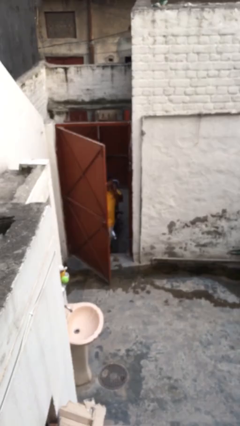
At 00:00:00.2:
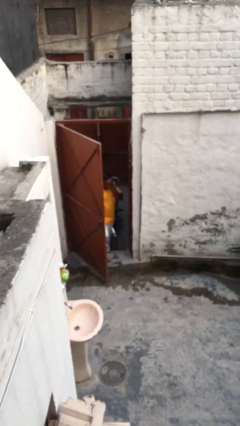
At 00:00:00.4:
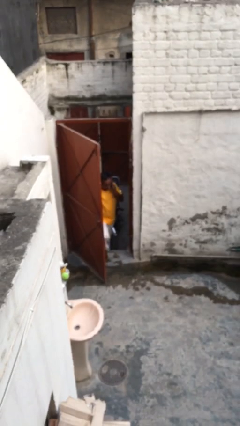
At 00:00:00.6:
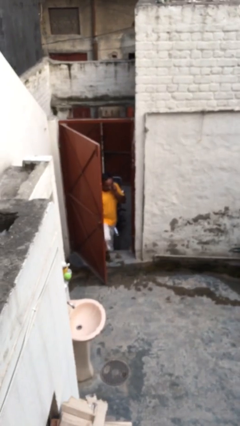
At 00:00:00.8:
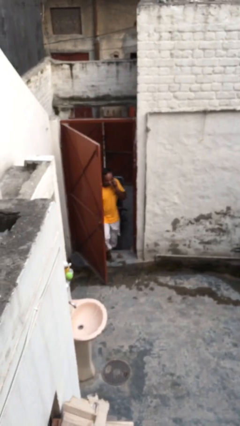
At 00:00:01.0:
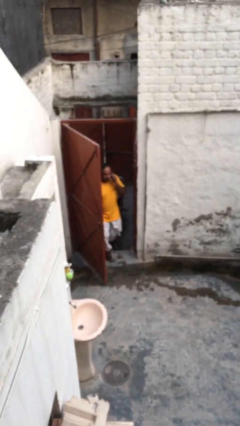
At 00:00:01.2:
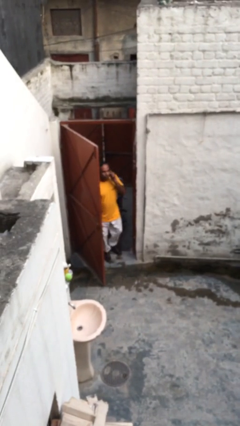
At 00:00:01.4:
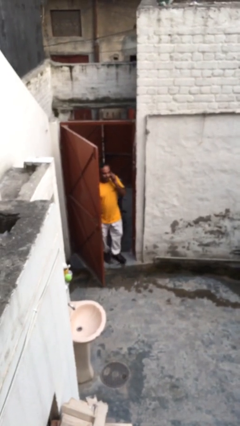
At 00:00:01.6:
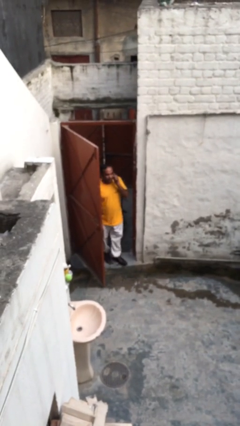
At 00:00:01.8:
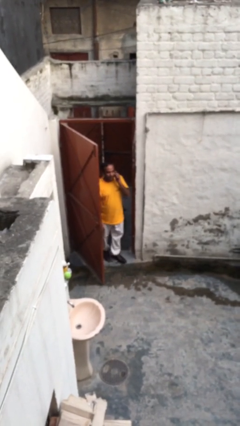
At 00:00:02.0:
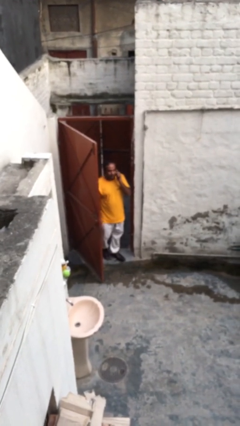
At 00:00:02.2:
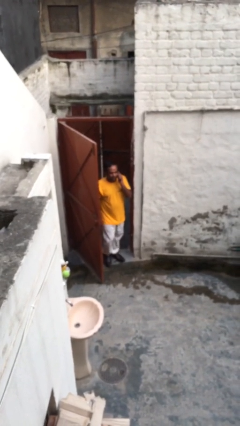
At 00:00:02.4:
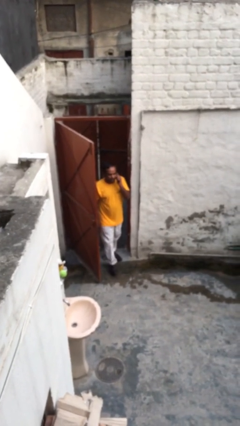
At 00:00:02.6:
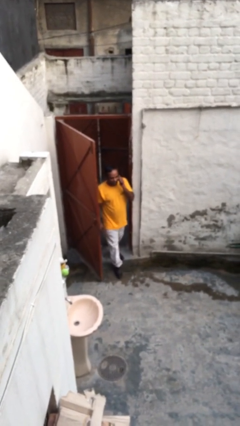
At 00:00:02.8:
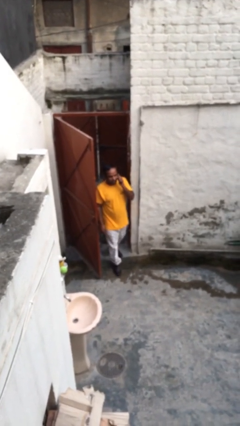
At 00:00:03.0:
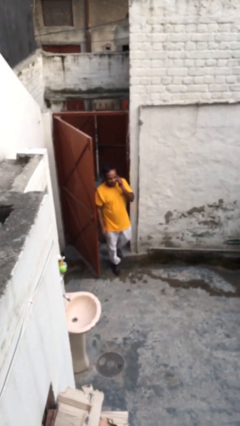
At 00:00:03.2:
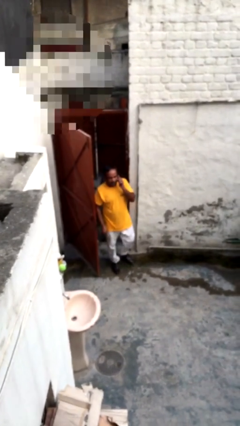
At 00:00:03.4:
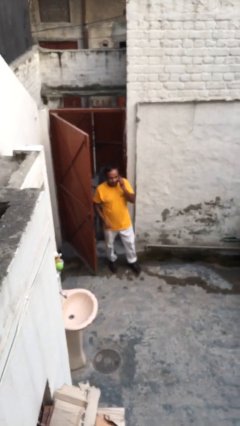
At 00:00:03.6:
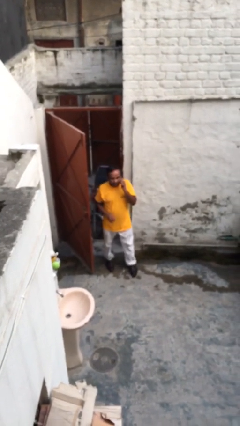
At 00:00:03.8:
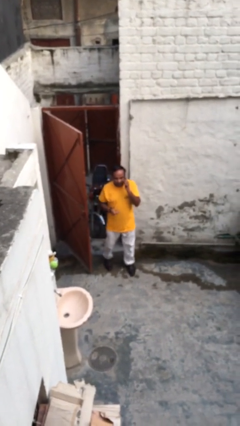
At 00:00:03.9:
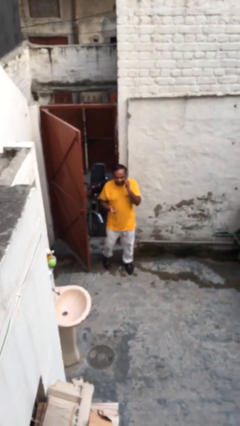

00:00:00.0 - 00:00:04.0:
person enters scene through structure

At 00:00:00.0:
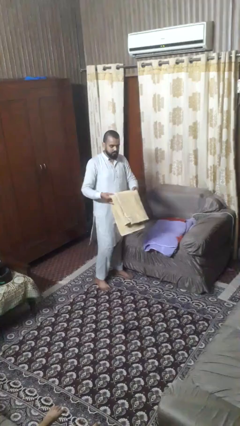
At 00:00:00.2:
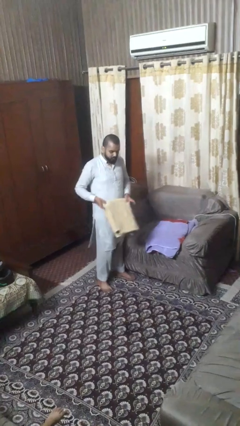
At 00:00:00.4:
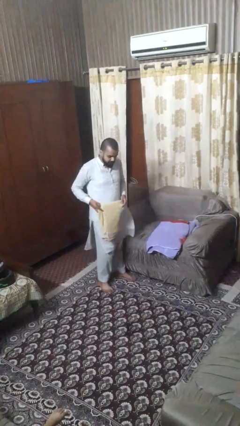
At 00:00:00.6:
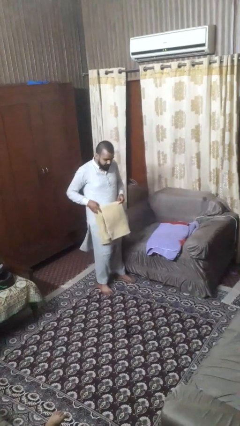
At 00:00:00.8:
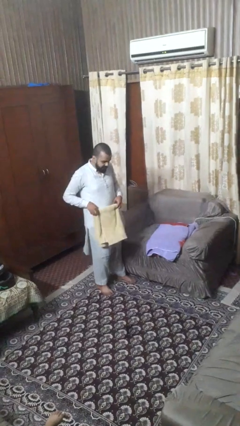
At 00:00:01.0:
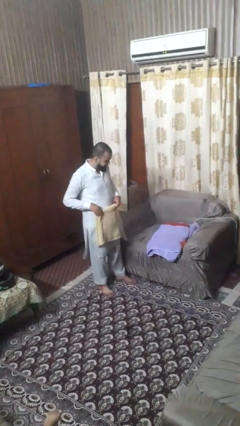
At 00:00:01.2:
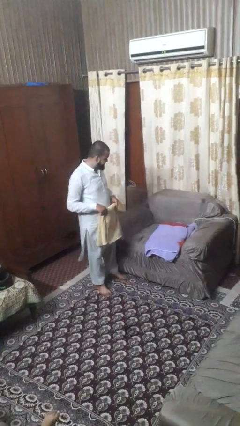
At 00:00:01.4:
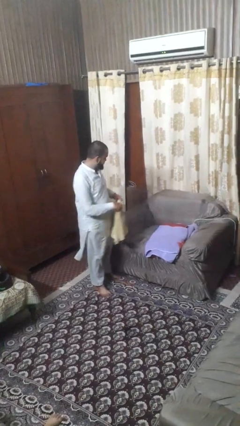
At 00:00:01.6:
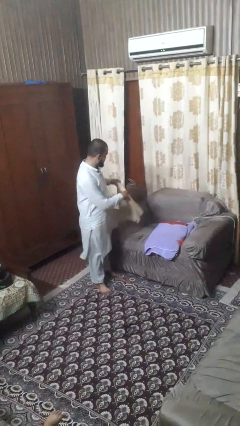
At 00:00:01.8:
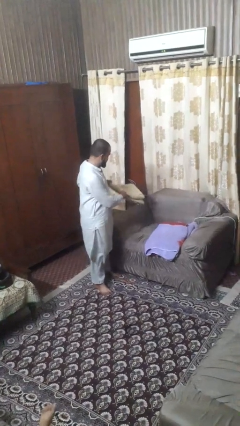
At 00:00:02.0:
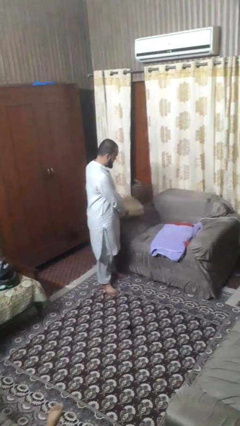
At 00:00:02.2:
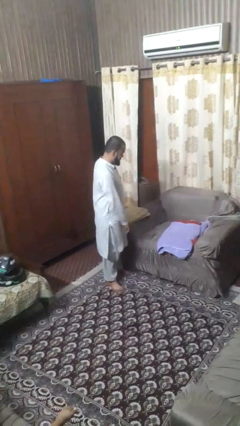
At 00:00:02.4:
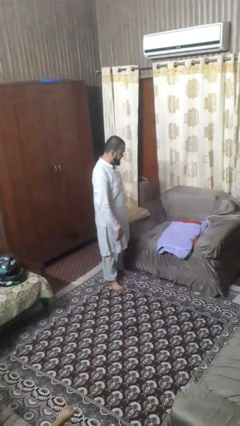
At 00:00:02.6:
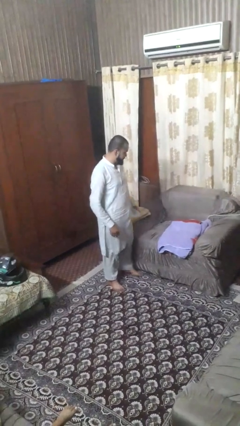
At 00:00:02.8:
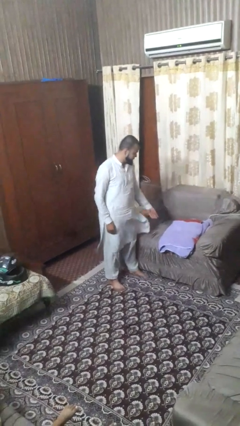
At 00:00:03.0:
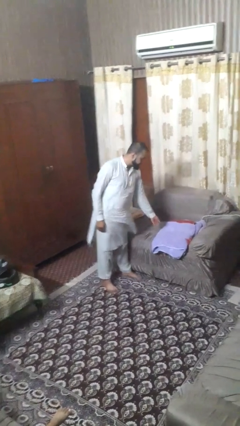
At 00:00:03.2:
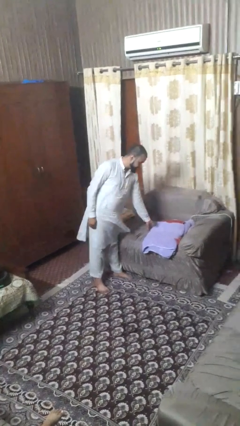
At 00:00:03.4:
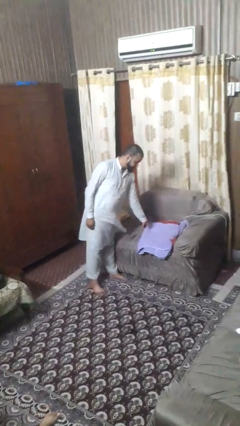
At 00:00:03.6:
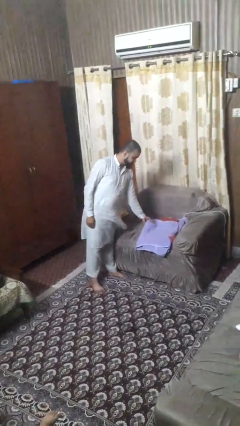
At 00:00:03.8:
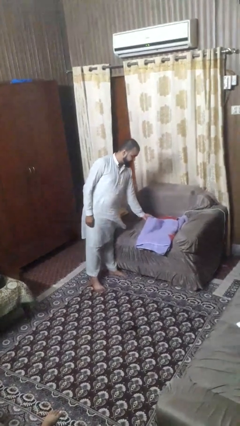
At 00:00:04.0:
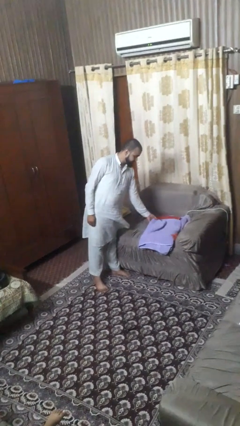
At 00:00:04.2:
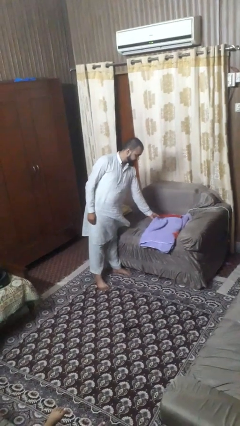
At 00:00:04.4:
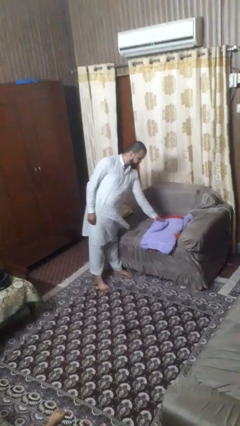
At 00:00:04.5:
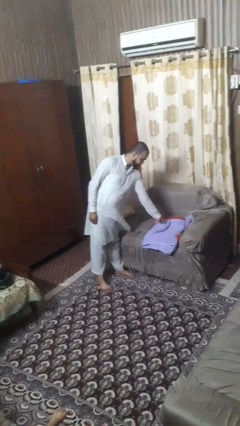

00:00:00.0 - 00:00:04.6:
person folds towel

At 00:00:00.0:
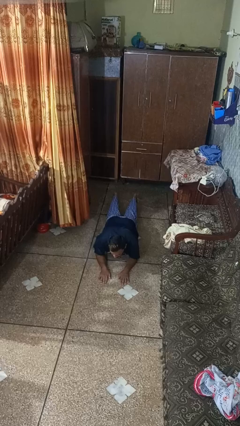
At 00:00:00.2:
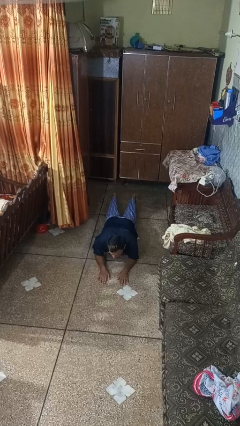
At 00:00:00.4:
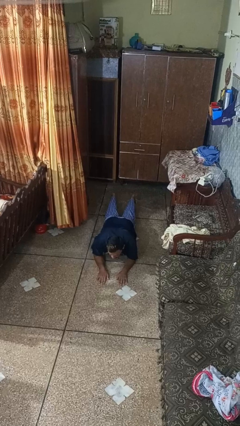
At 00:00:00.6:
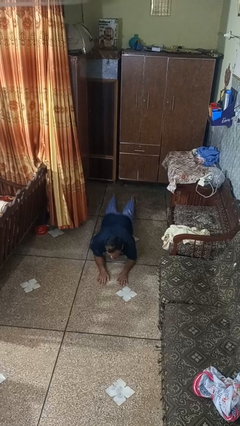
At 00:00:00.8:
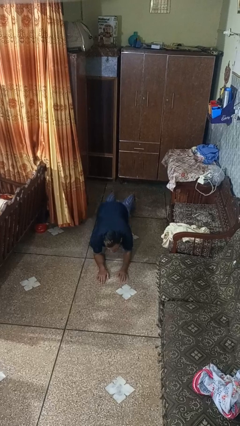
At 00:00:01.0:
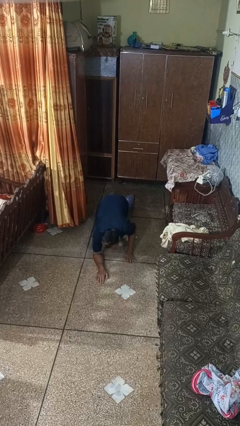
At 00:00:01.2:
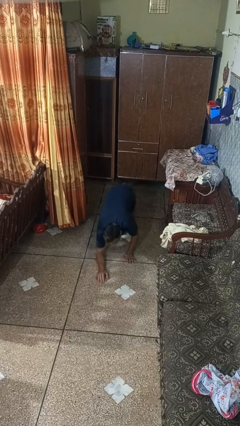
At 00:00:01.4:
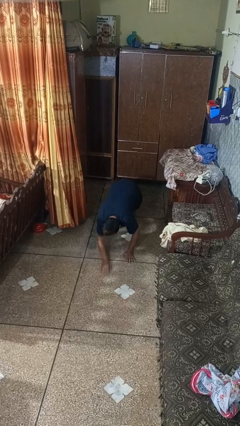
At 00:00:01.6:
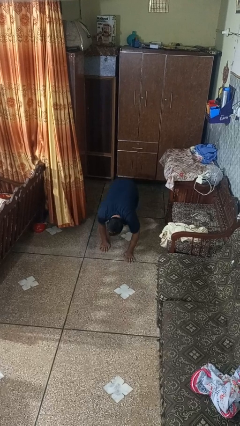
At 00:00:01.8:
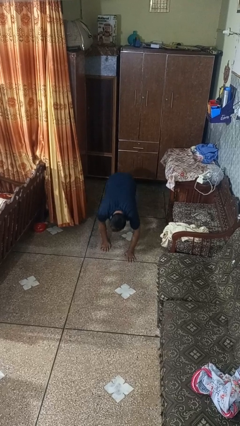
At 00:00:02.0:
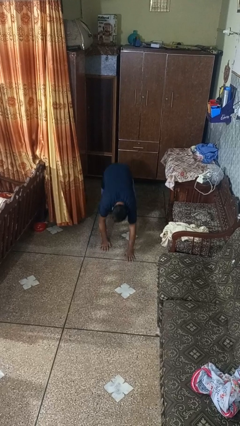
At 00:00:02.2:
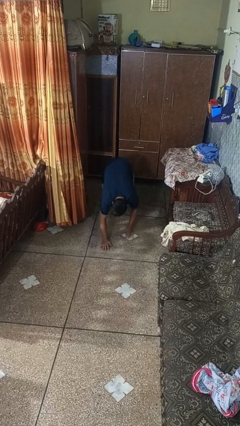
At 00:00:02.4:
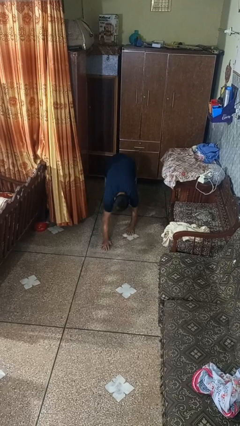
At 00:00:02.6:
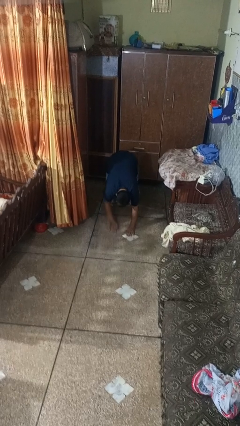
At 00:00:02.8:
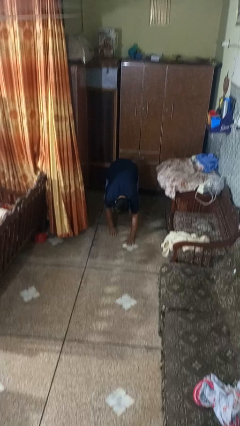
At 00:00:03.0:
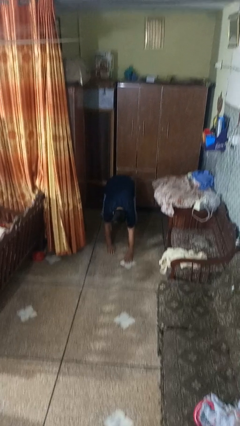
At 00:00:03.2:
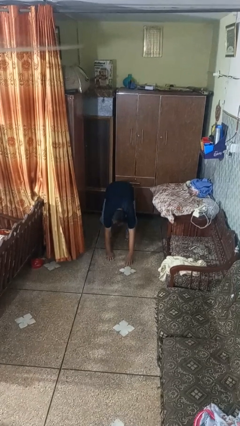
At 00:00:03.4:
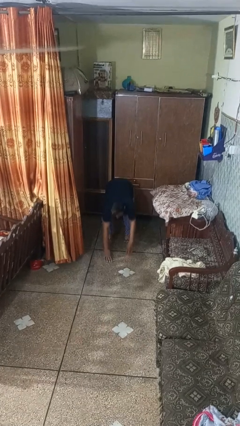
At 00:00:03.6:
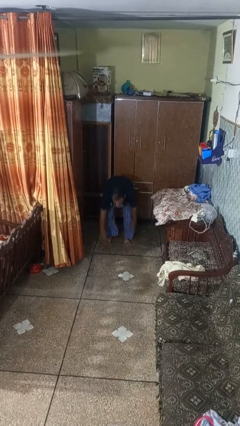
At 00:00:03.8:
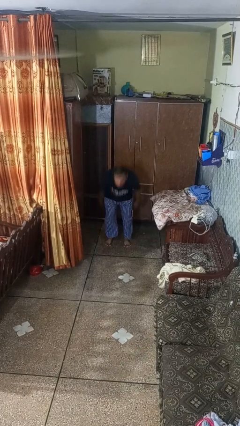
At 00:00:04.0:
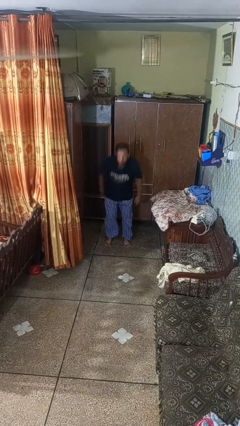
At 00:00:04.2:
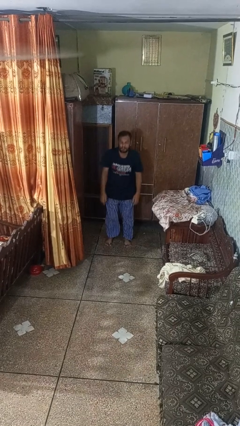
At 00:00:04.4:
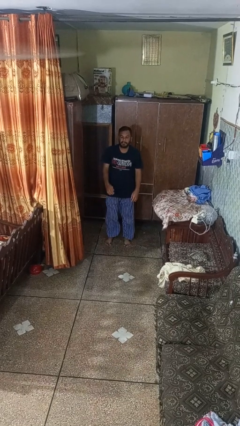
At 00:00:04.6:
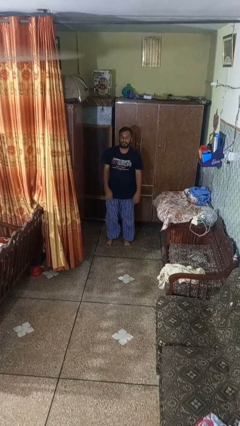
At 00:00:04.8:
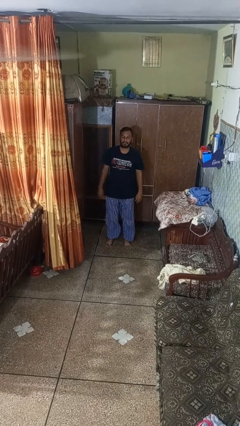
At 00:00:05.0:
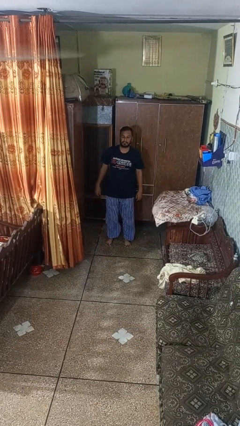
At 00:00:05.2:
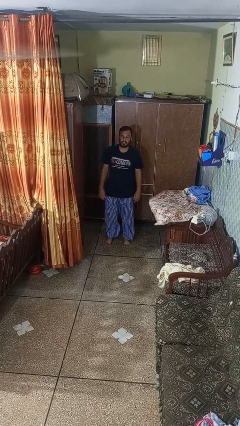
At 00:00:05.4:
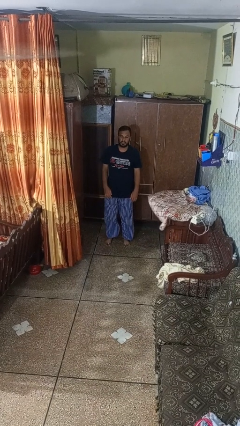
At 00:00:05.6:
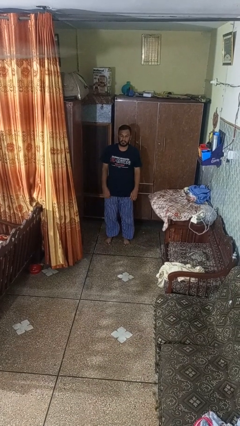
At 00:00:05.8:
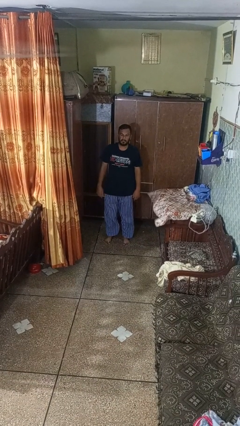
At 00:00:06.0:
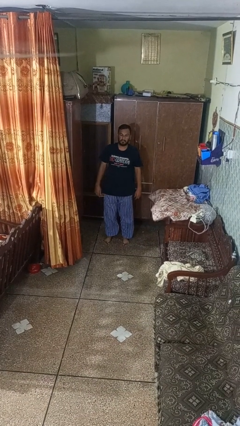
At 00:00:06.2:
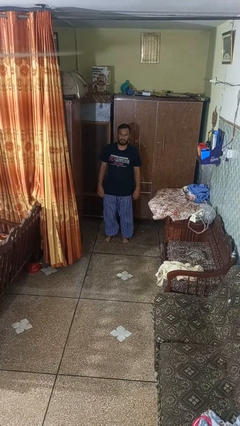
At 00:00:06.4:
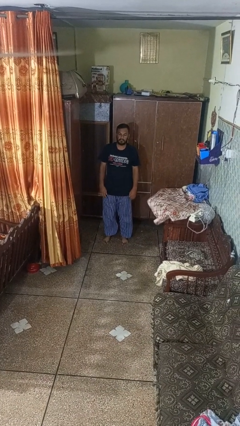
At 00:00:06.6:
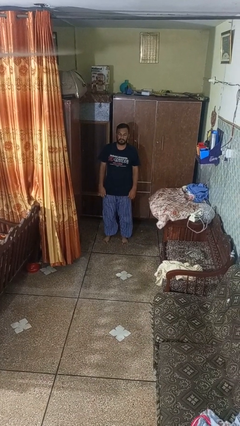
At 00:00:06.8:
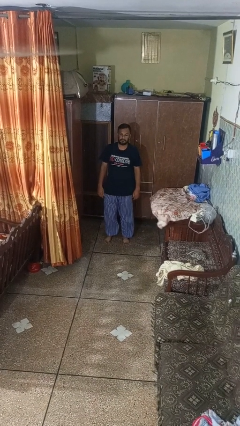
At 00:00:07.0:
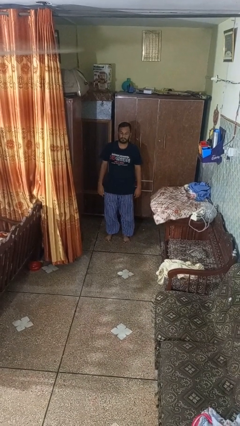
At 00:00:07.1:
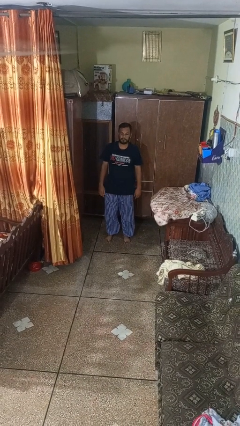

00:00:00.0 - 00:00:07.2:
person stands up from floor

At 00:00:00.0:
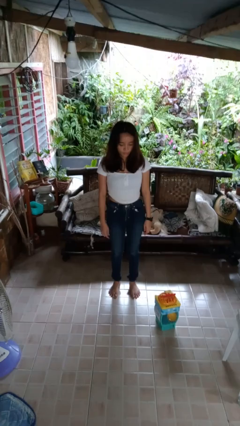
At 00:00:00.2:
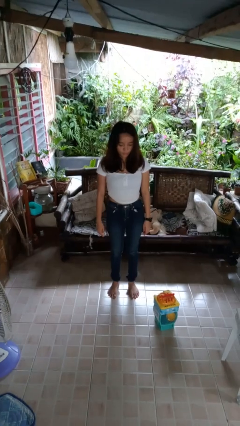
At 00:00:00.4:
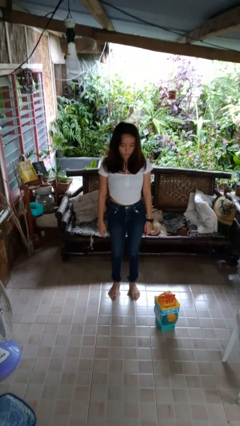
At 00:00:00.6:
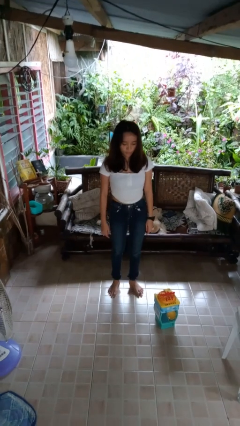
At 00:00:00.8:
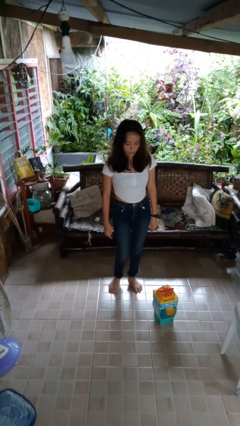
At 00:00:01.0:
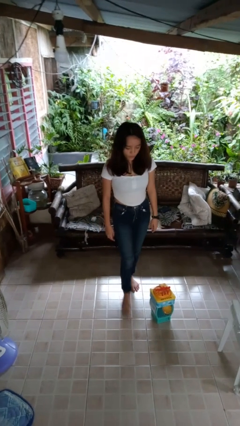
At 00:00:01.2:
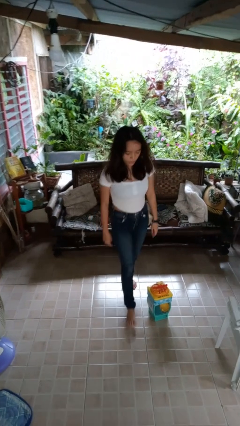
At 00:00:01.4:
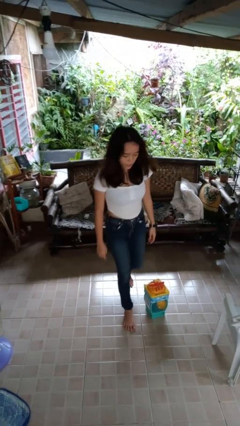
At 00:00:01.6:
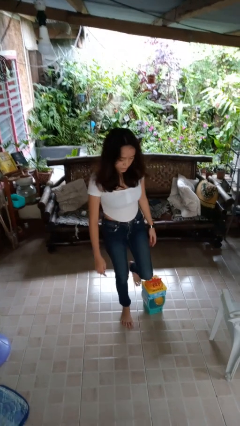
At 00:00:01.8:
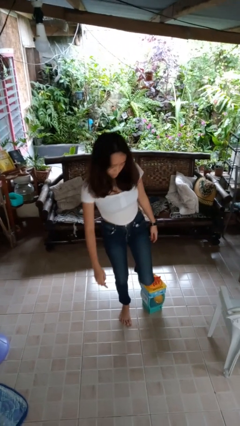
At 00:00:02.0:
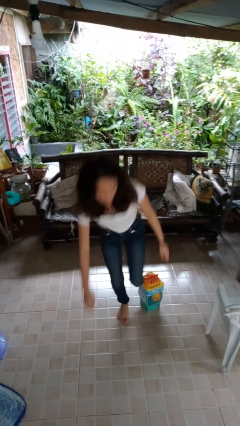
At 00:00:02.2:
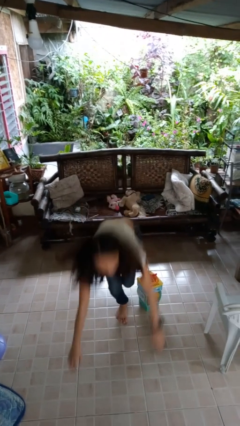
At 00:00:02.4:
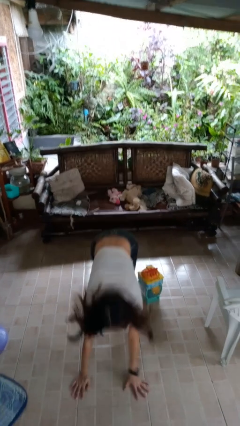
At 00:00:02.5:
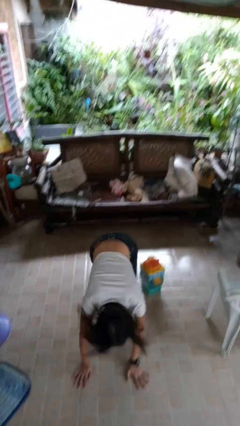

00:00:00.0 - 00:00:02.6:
person trips on object on floor
